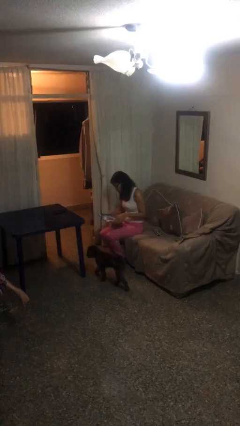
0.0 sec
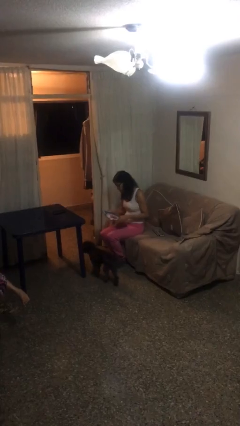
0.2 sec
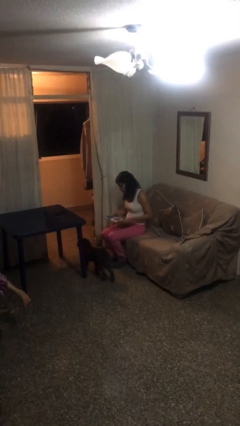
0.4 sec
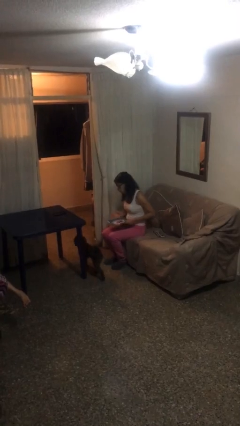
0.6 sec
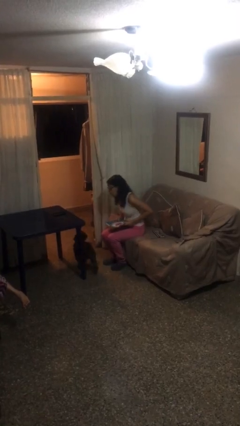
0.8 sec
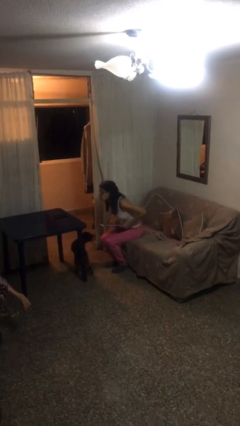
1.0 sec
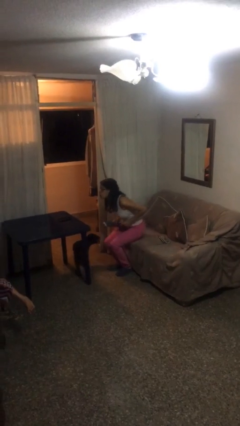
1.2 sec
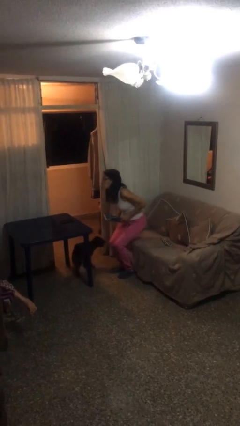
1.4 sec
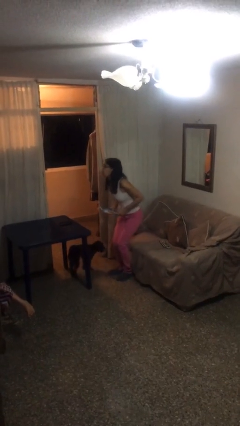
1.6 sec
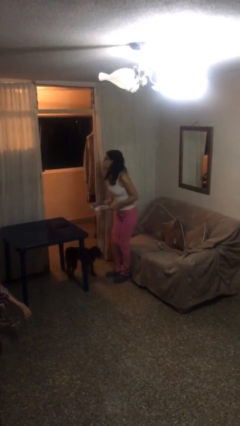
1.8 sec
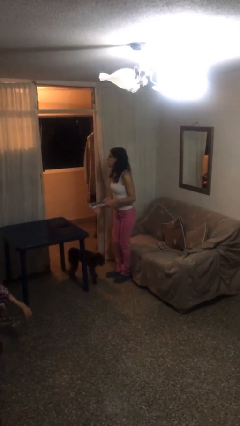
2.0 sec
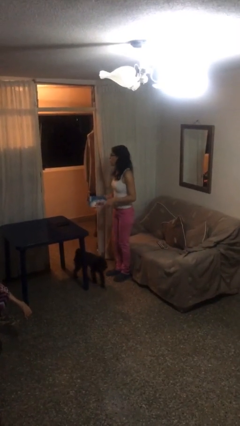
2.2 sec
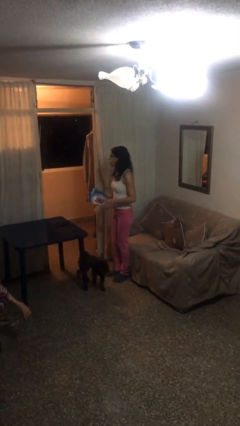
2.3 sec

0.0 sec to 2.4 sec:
person stands up

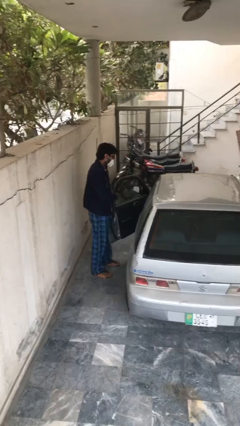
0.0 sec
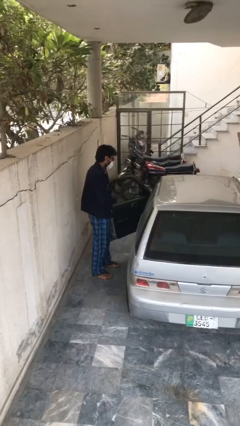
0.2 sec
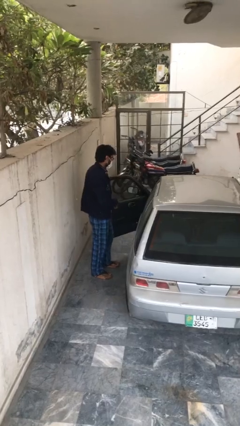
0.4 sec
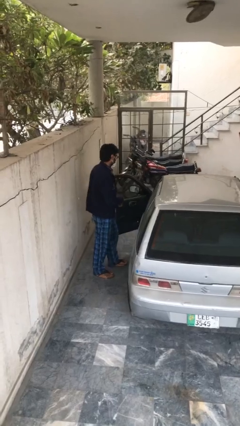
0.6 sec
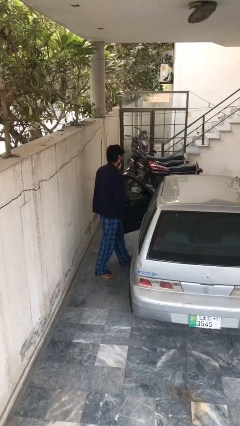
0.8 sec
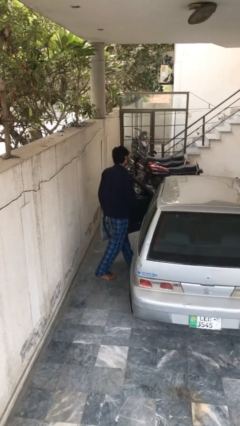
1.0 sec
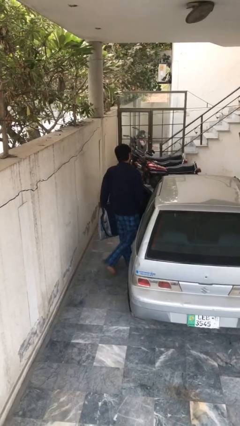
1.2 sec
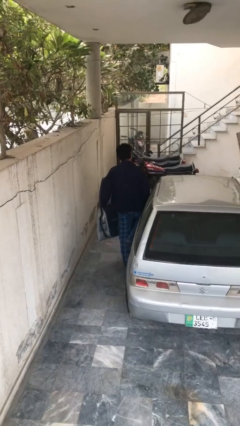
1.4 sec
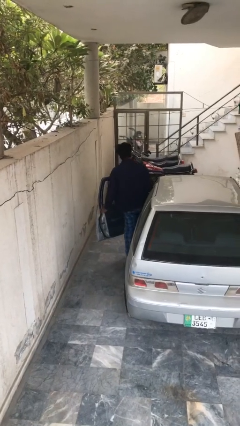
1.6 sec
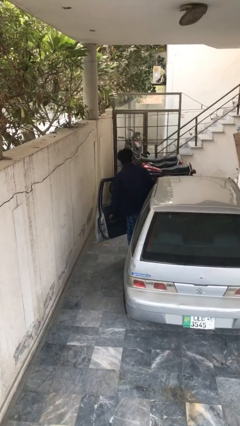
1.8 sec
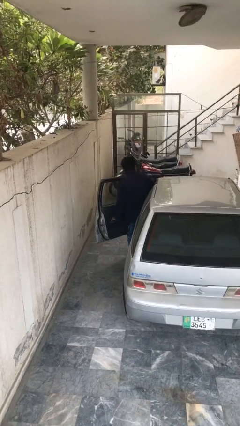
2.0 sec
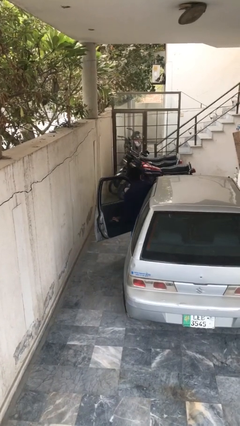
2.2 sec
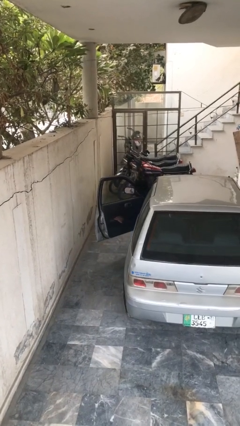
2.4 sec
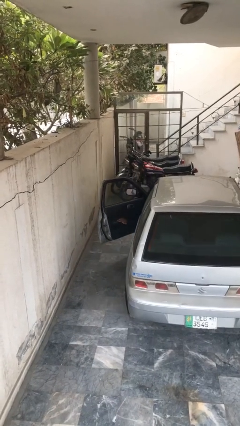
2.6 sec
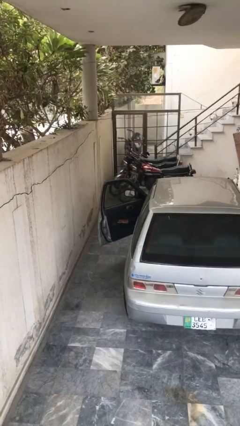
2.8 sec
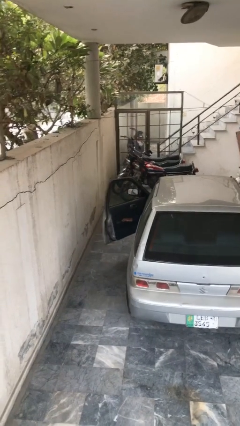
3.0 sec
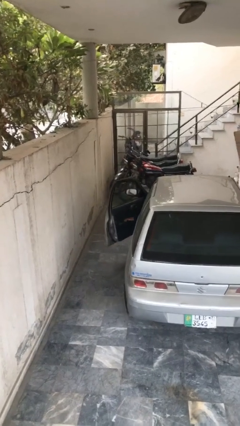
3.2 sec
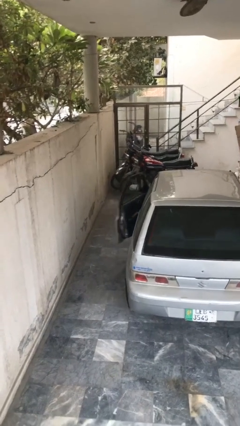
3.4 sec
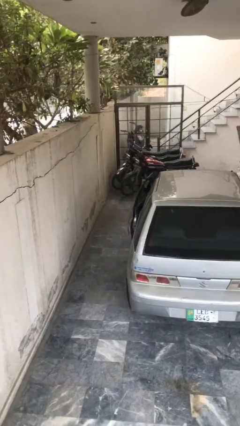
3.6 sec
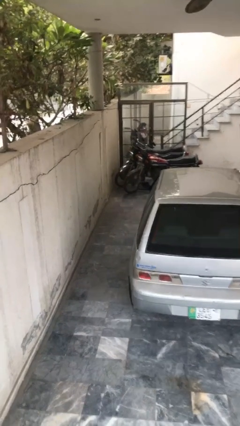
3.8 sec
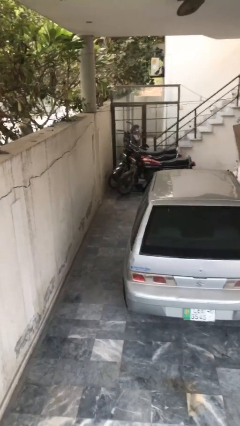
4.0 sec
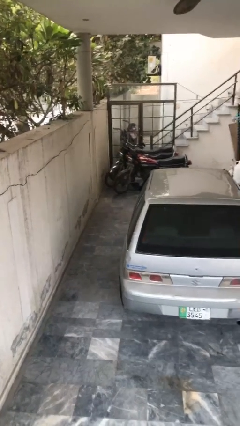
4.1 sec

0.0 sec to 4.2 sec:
person enters car

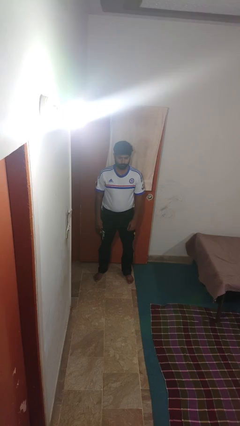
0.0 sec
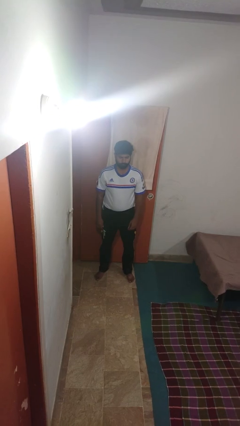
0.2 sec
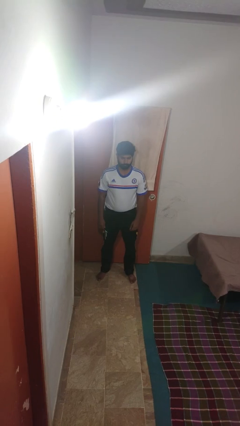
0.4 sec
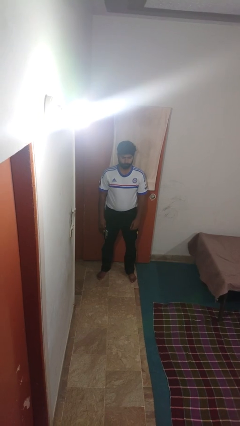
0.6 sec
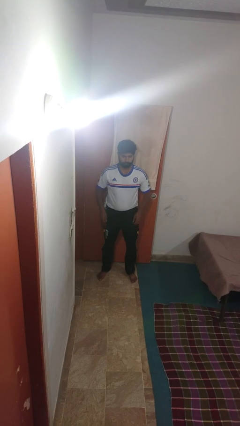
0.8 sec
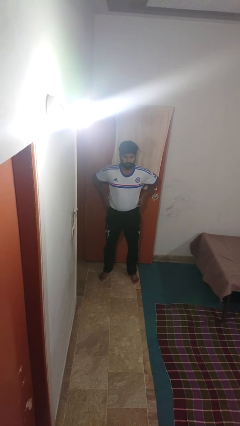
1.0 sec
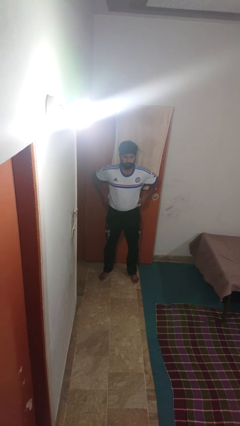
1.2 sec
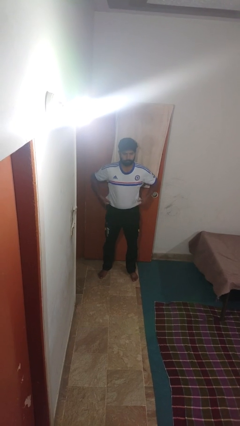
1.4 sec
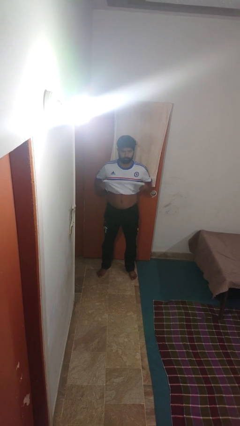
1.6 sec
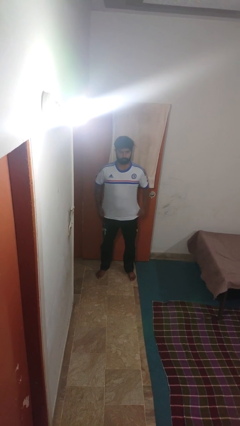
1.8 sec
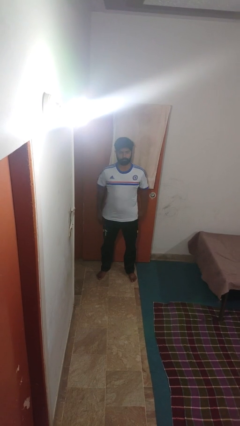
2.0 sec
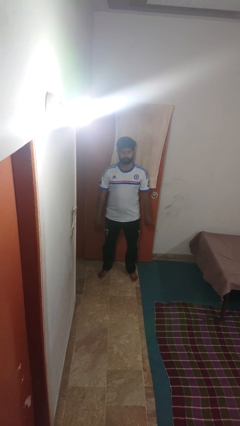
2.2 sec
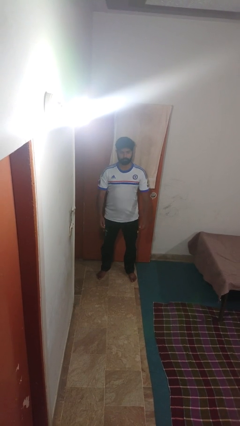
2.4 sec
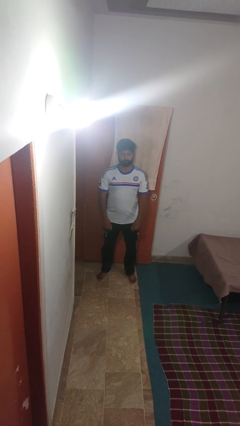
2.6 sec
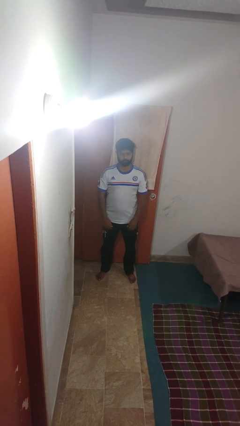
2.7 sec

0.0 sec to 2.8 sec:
person untucks shirt

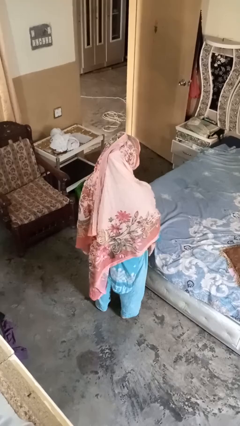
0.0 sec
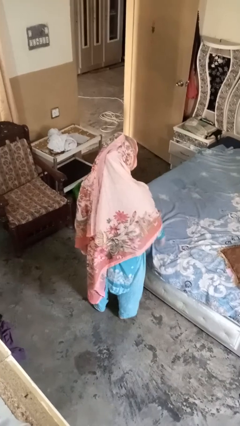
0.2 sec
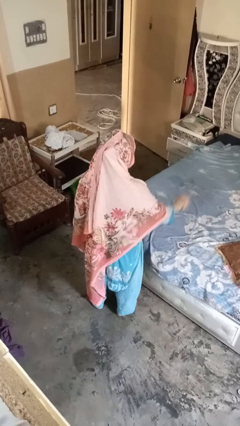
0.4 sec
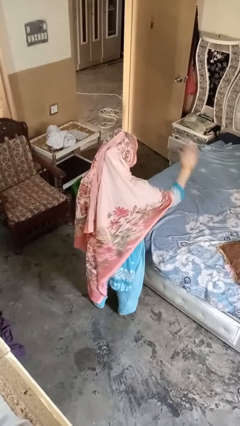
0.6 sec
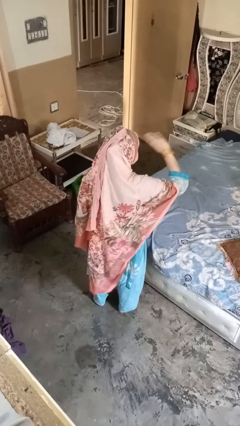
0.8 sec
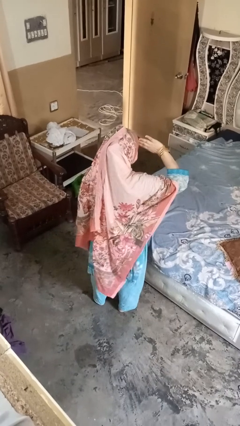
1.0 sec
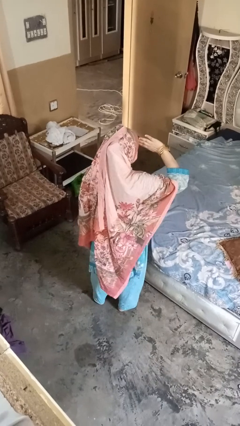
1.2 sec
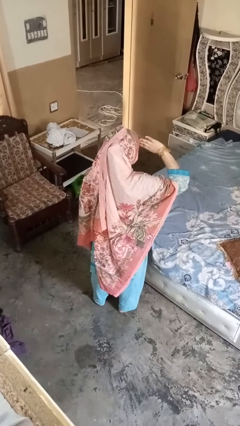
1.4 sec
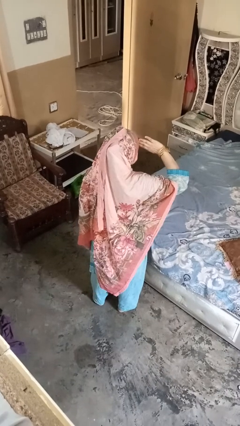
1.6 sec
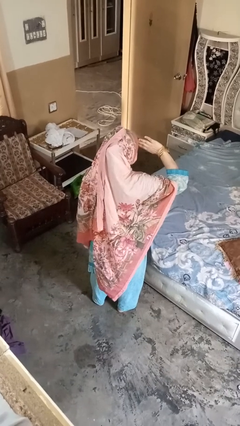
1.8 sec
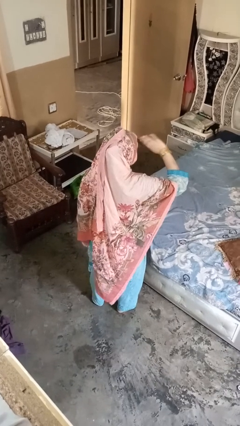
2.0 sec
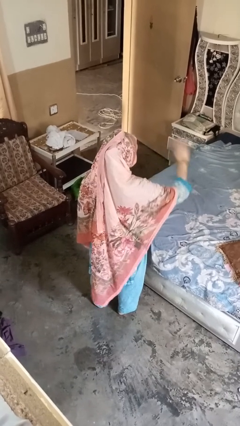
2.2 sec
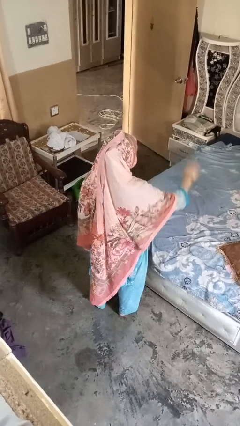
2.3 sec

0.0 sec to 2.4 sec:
person salutes

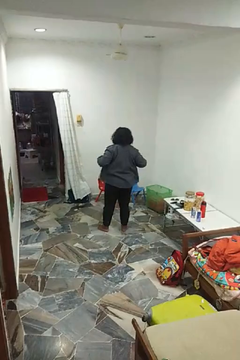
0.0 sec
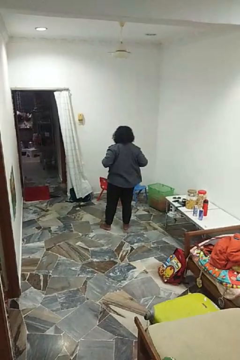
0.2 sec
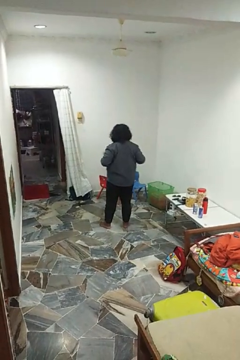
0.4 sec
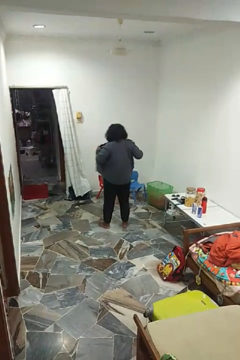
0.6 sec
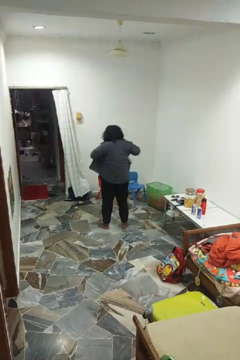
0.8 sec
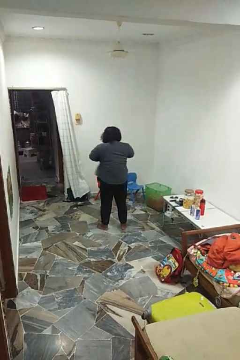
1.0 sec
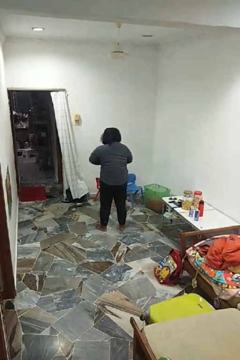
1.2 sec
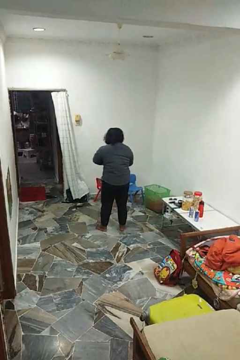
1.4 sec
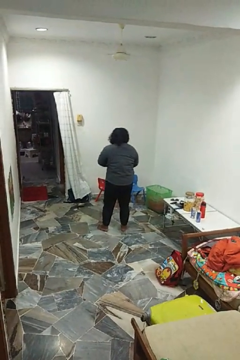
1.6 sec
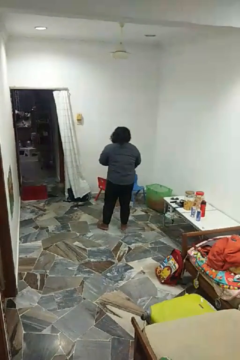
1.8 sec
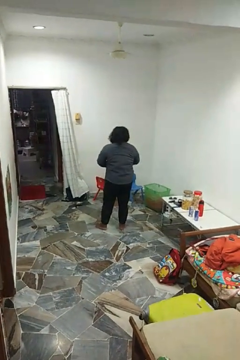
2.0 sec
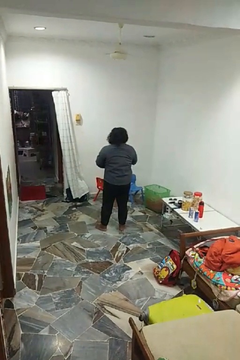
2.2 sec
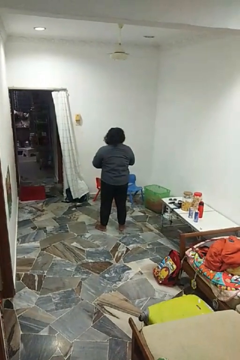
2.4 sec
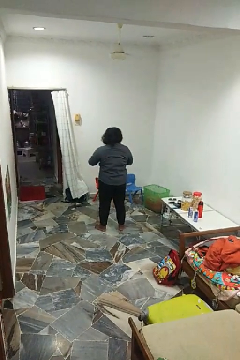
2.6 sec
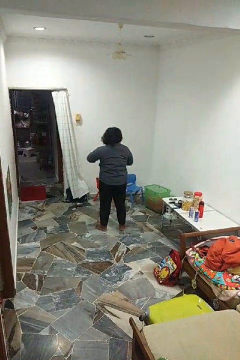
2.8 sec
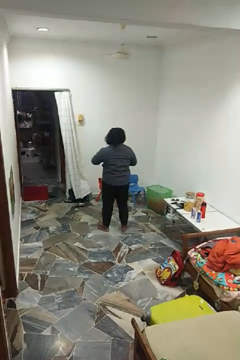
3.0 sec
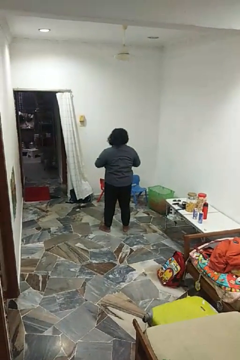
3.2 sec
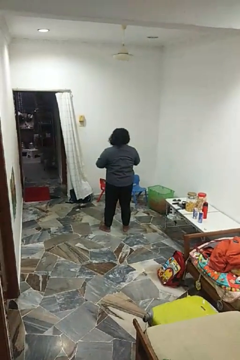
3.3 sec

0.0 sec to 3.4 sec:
person buttons shirt

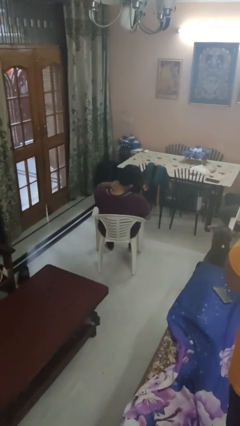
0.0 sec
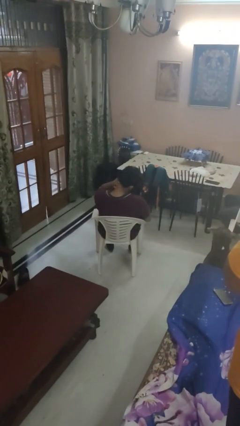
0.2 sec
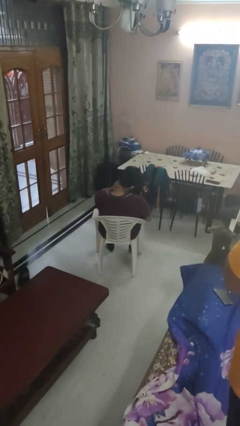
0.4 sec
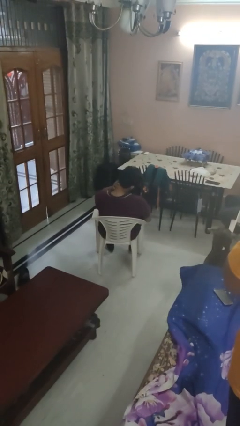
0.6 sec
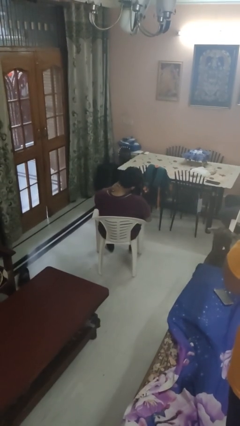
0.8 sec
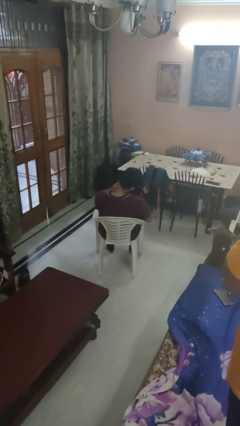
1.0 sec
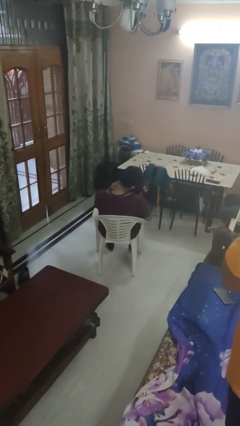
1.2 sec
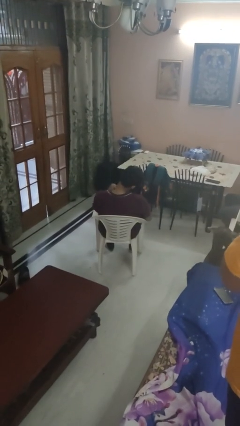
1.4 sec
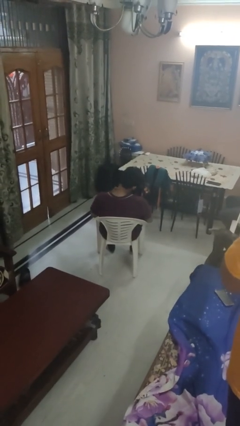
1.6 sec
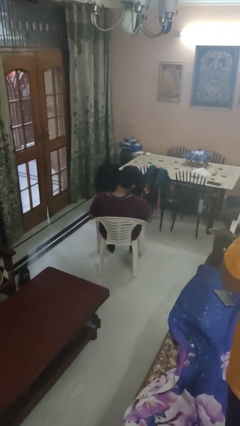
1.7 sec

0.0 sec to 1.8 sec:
person rubs neck

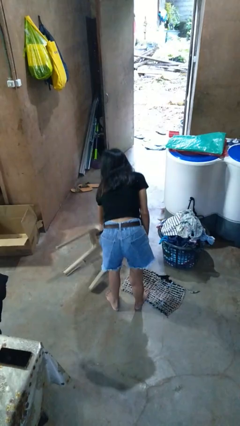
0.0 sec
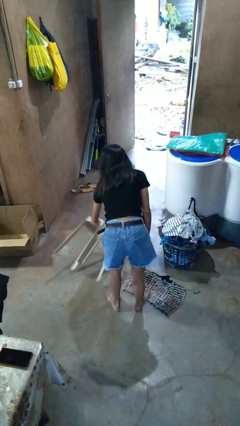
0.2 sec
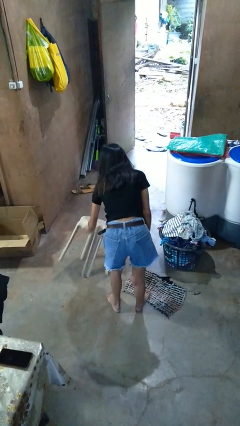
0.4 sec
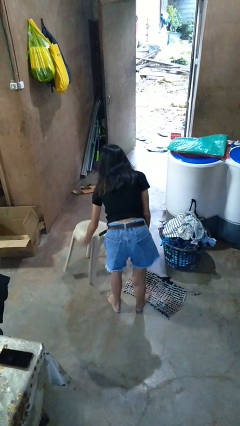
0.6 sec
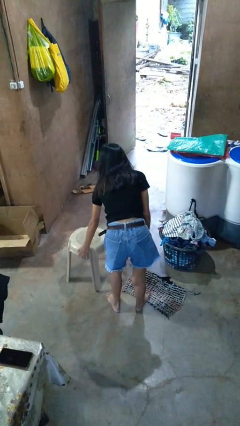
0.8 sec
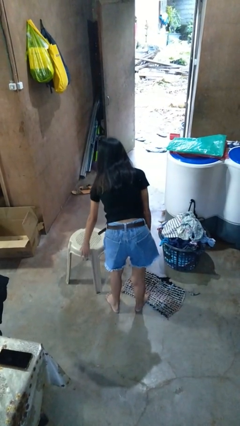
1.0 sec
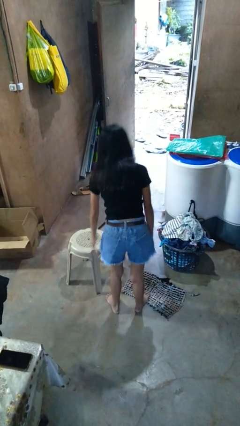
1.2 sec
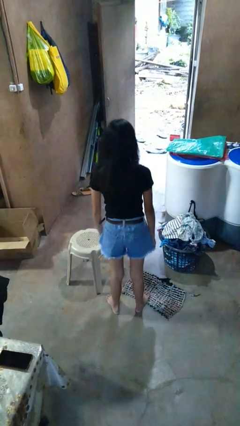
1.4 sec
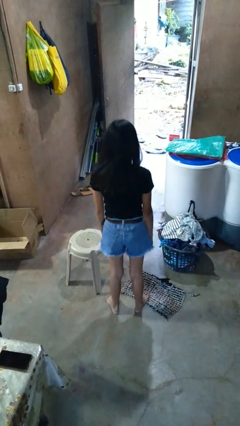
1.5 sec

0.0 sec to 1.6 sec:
person sets upright furniture
